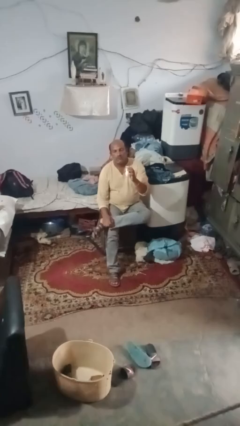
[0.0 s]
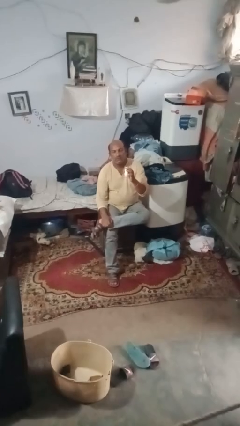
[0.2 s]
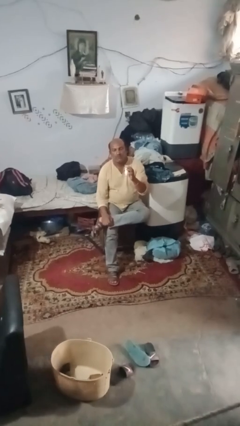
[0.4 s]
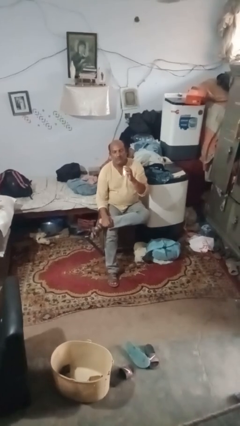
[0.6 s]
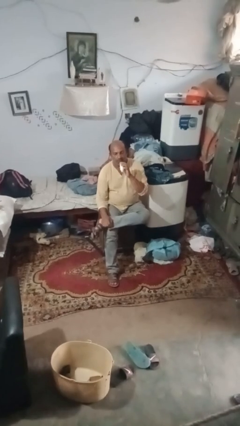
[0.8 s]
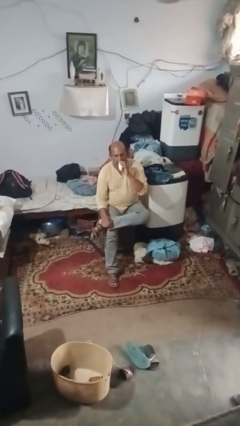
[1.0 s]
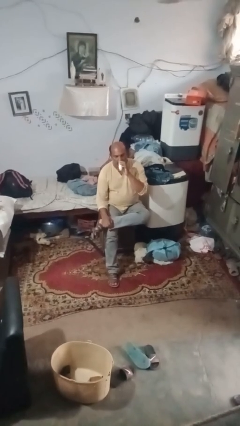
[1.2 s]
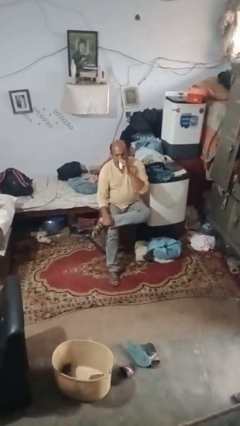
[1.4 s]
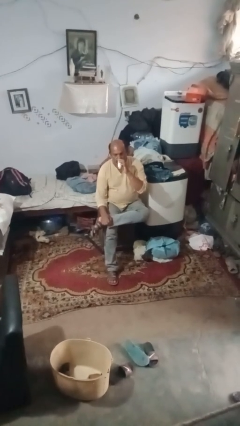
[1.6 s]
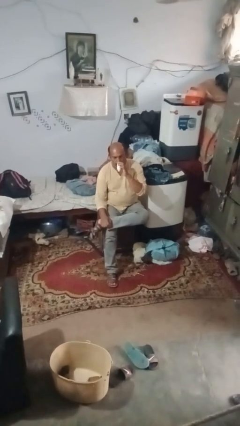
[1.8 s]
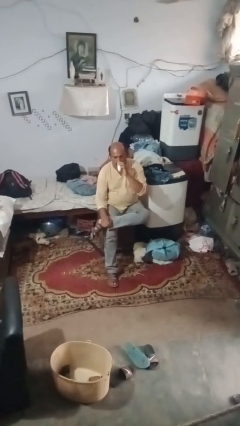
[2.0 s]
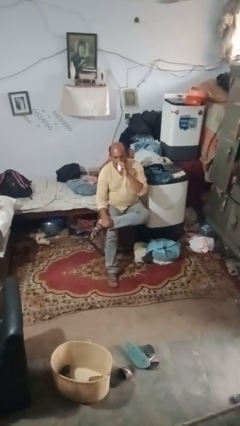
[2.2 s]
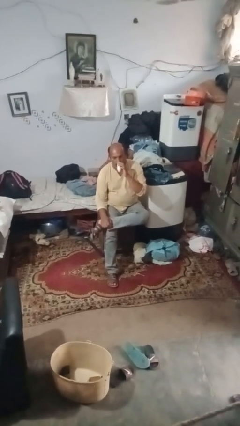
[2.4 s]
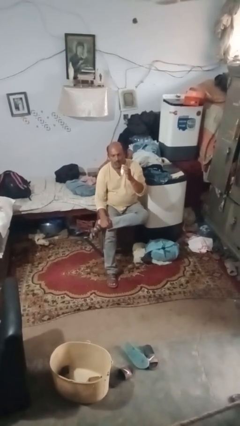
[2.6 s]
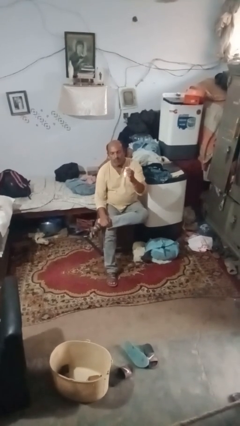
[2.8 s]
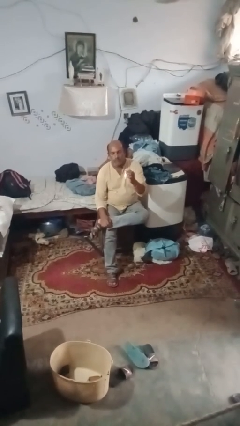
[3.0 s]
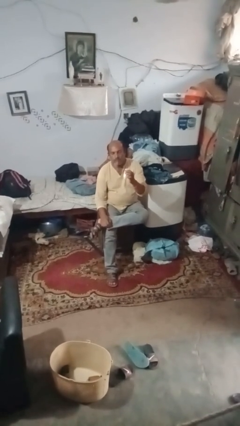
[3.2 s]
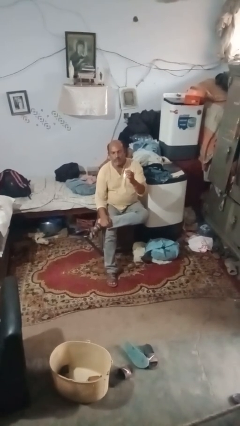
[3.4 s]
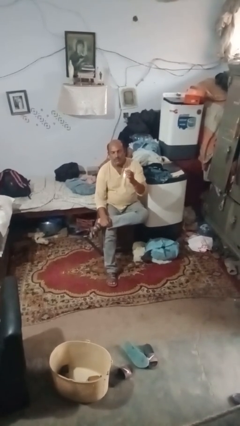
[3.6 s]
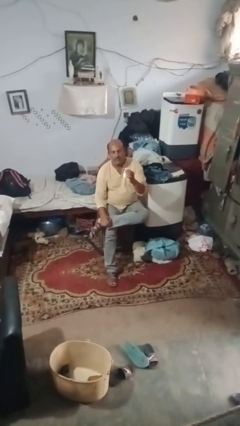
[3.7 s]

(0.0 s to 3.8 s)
person vapes

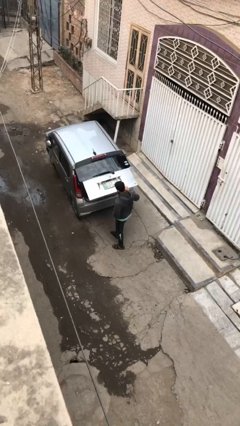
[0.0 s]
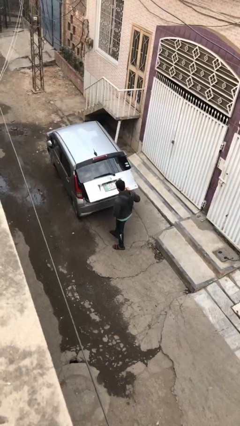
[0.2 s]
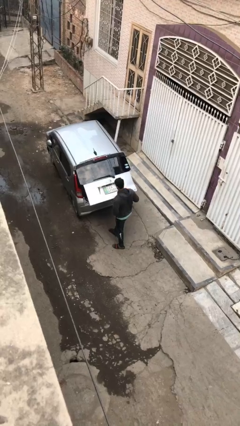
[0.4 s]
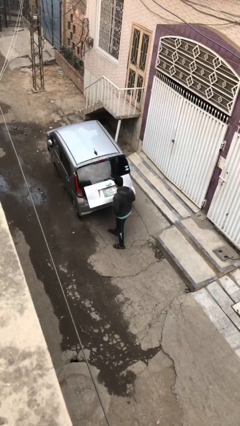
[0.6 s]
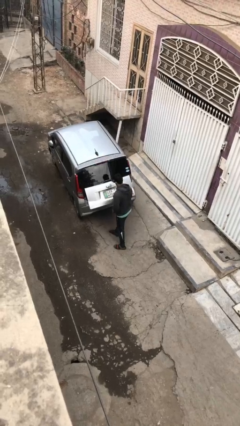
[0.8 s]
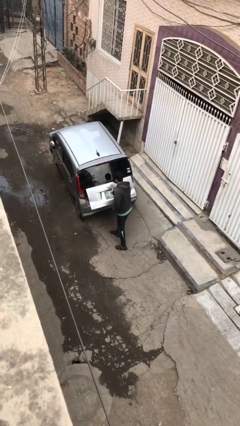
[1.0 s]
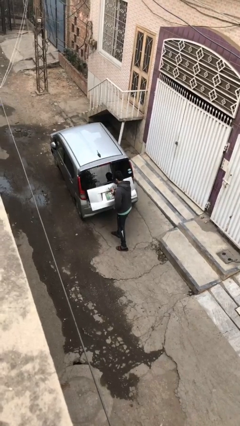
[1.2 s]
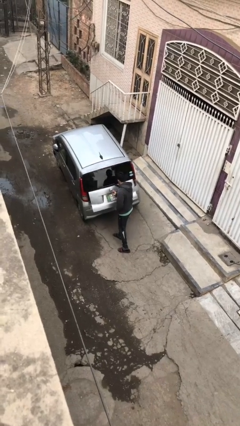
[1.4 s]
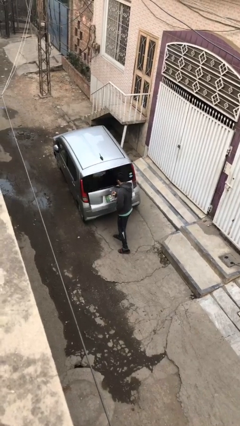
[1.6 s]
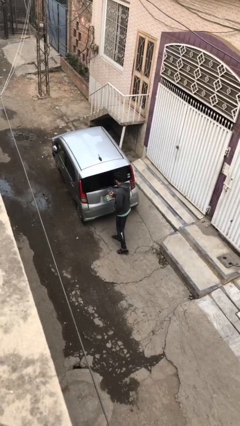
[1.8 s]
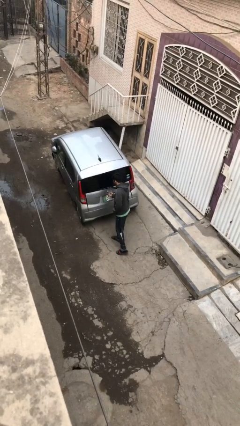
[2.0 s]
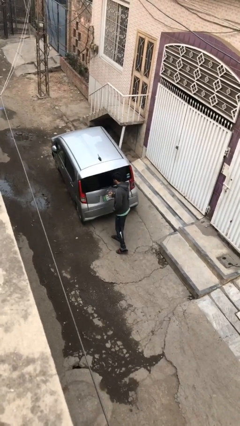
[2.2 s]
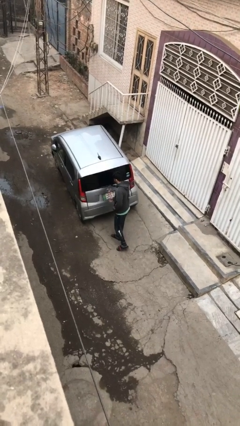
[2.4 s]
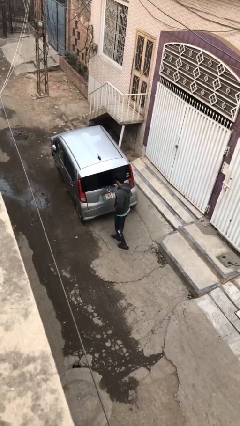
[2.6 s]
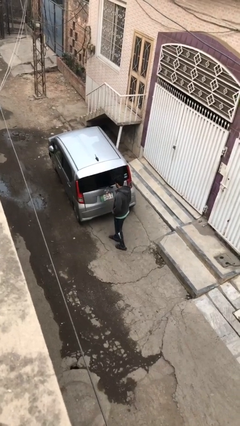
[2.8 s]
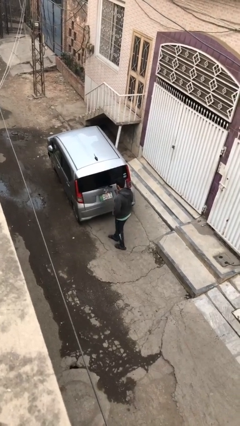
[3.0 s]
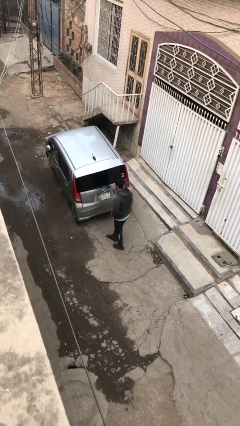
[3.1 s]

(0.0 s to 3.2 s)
person closes car trunk

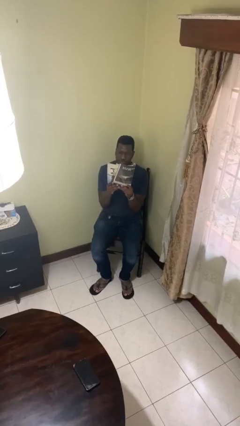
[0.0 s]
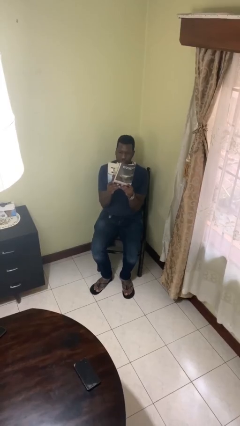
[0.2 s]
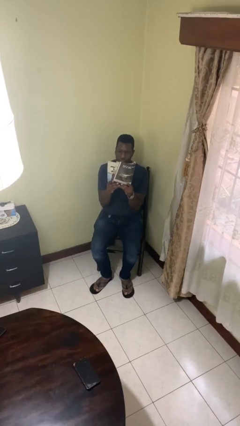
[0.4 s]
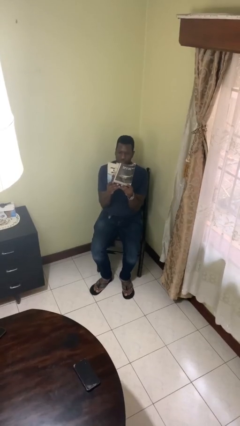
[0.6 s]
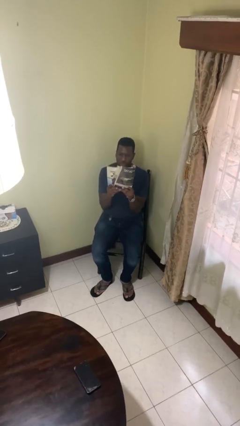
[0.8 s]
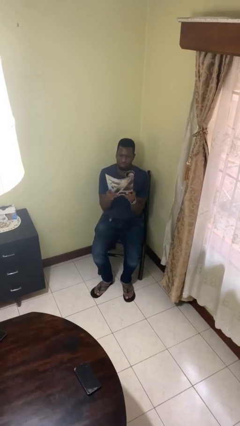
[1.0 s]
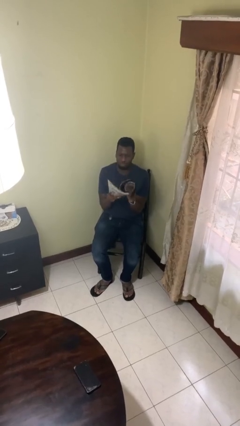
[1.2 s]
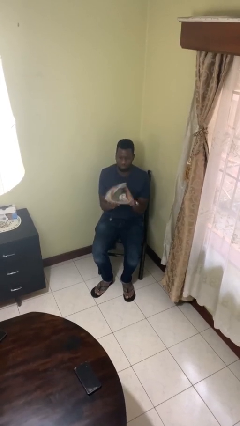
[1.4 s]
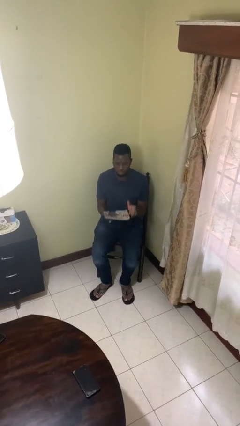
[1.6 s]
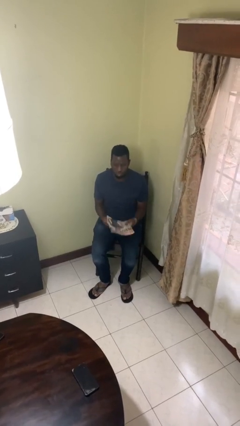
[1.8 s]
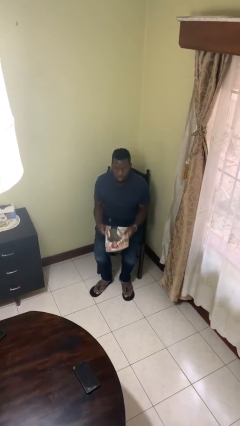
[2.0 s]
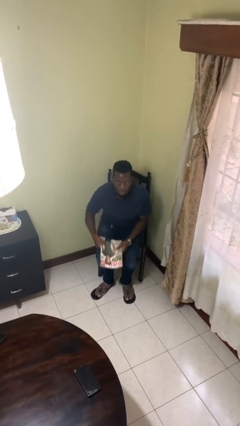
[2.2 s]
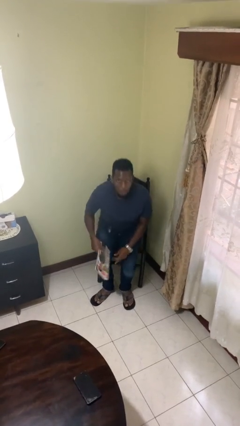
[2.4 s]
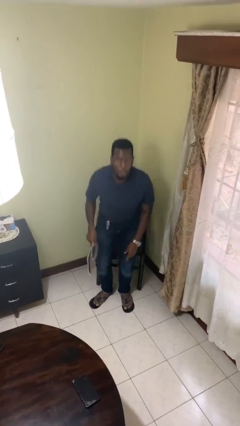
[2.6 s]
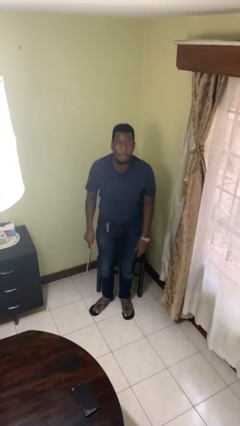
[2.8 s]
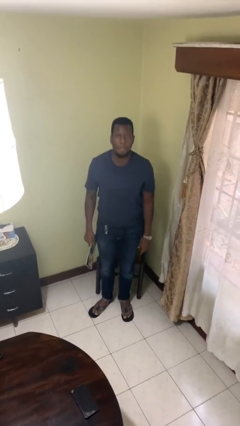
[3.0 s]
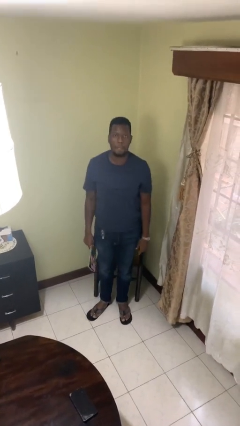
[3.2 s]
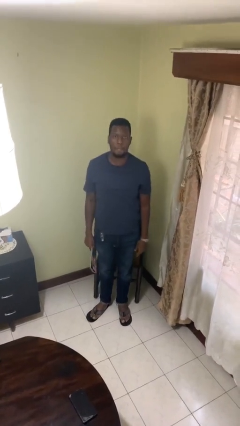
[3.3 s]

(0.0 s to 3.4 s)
person stands up

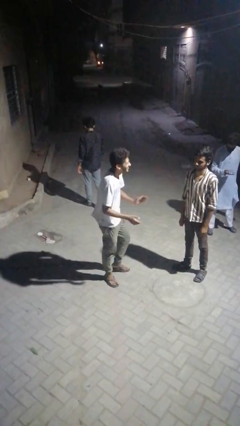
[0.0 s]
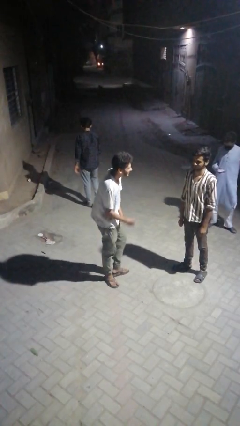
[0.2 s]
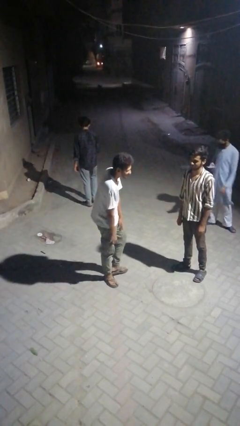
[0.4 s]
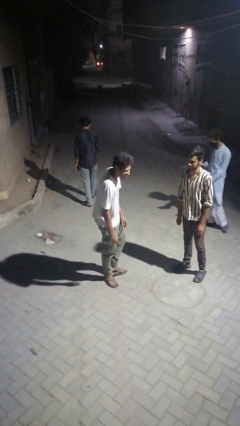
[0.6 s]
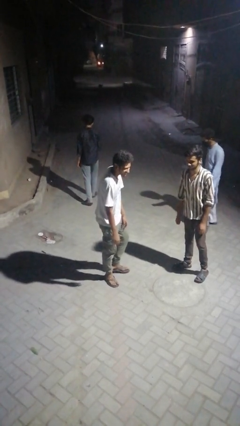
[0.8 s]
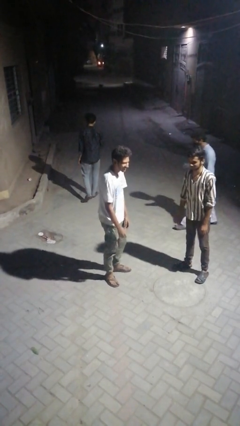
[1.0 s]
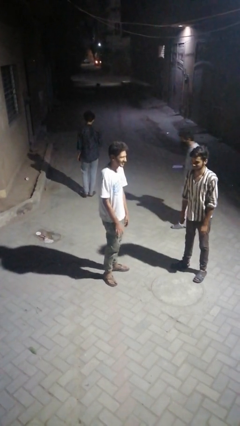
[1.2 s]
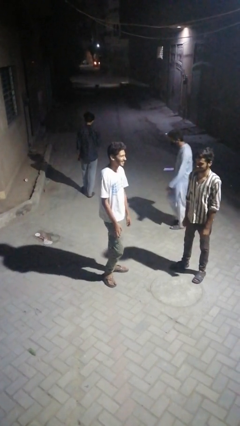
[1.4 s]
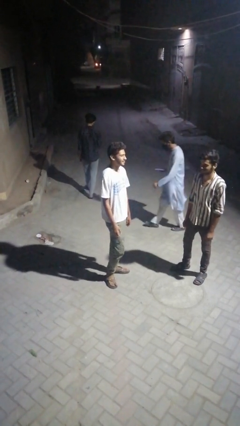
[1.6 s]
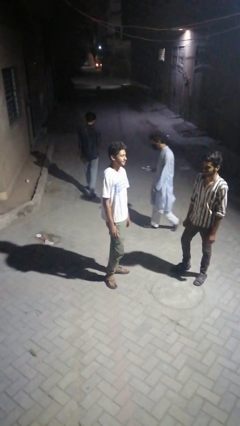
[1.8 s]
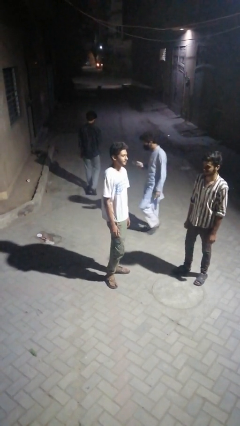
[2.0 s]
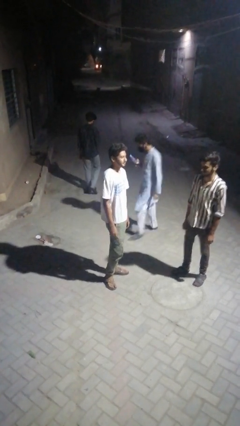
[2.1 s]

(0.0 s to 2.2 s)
person laughs with person

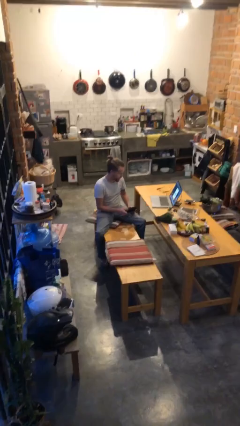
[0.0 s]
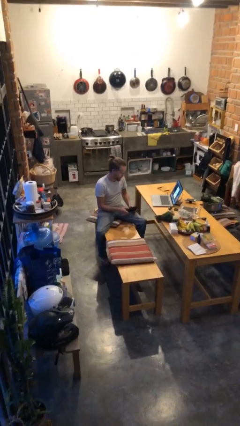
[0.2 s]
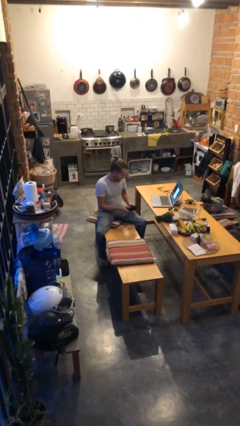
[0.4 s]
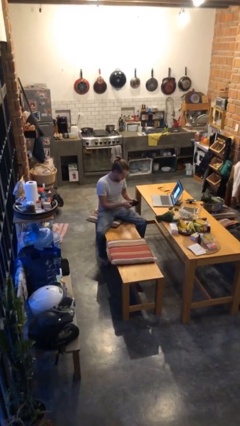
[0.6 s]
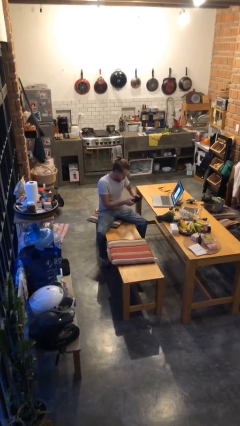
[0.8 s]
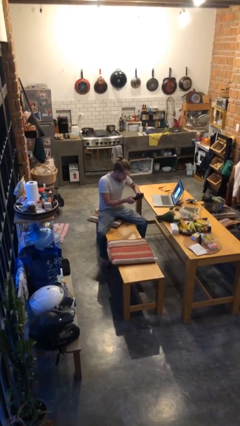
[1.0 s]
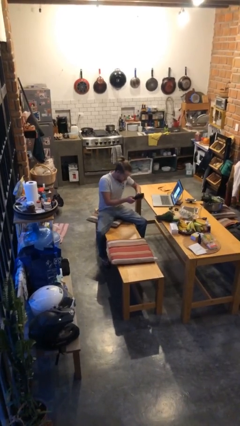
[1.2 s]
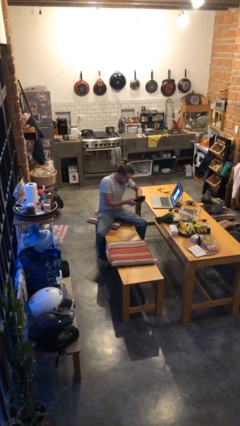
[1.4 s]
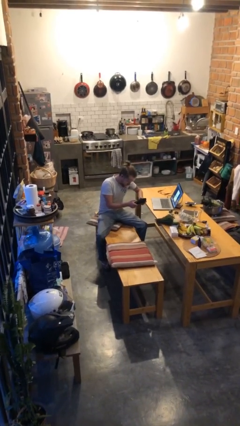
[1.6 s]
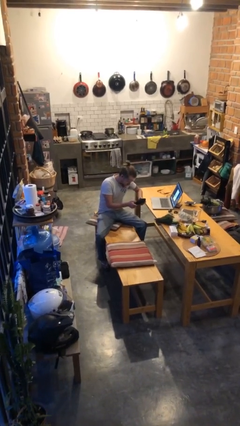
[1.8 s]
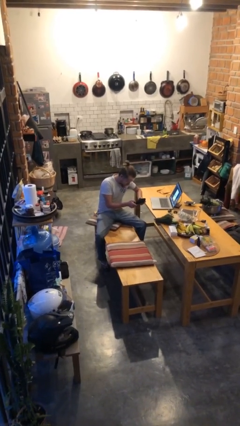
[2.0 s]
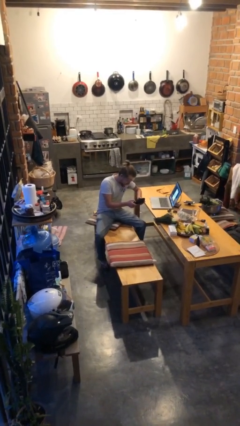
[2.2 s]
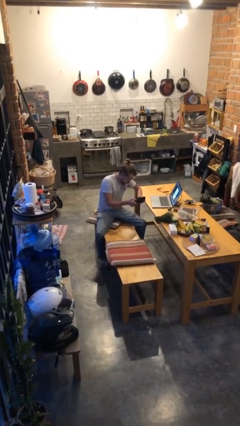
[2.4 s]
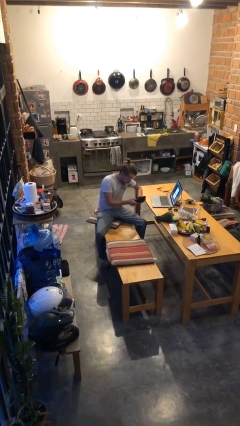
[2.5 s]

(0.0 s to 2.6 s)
person interacts with handheld game

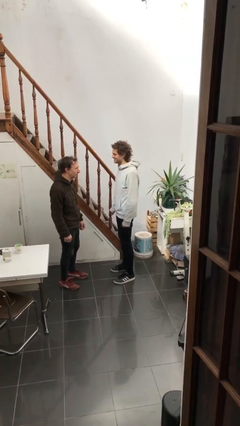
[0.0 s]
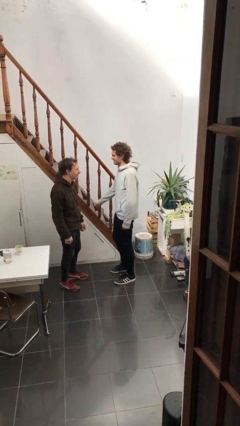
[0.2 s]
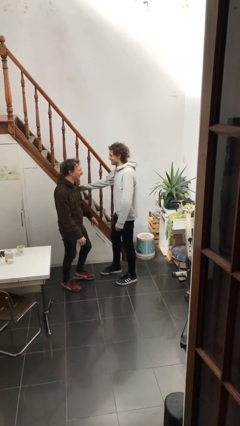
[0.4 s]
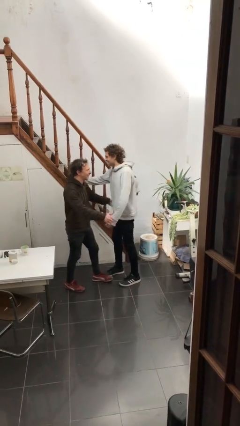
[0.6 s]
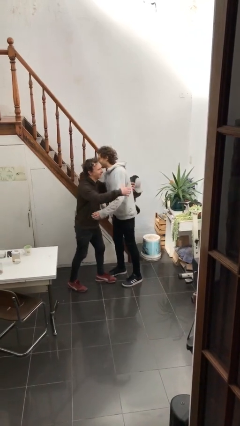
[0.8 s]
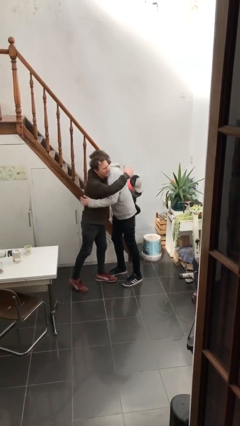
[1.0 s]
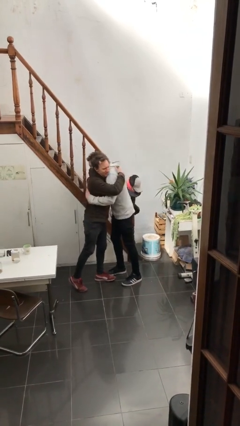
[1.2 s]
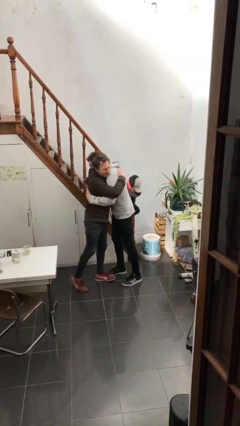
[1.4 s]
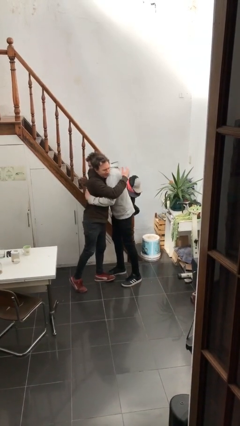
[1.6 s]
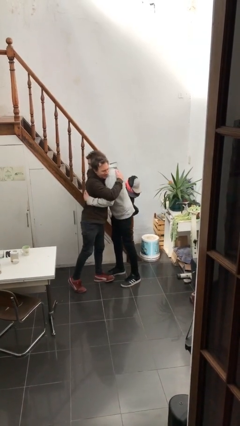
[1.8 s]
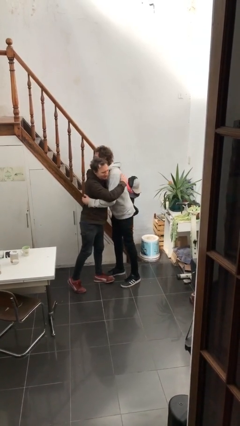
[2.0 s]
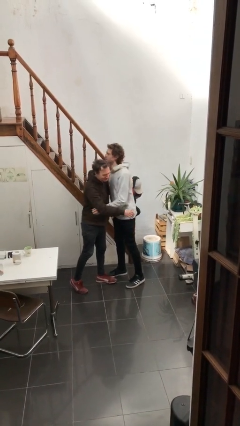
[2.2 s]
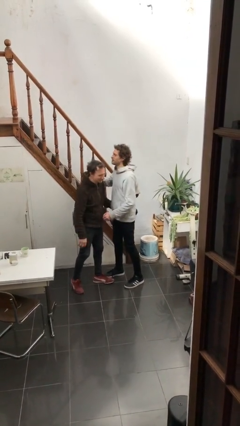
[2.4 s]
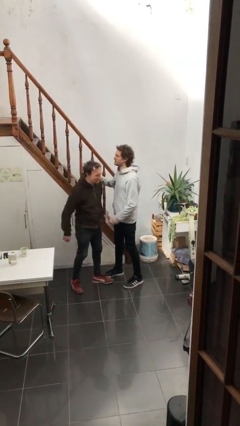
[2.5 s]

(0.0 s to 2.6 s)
person embraces person
